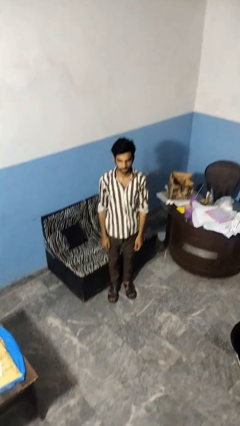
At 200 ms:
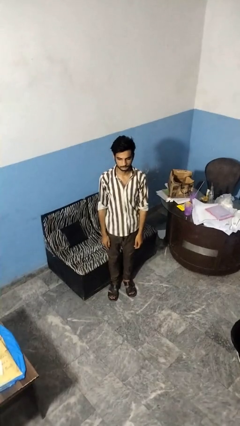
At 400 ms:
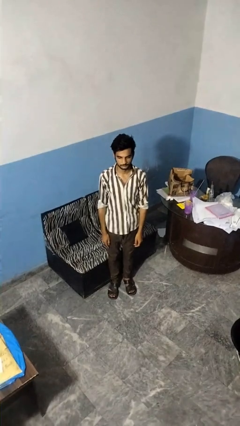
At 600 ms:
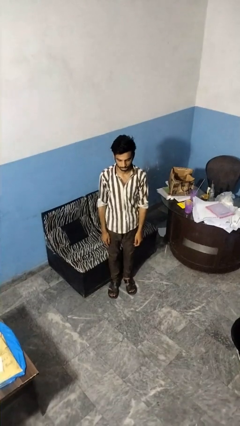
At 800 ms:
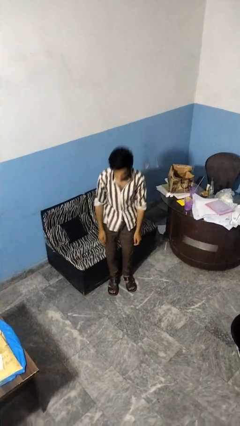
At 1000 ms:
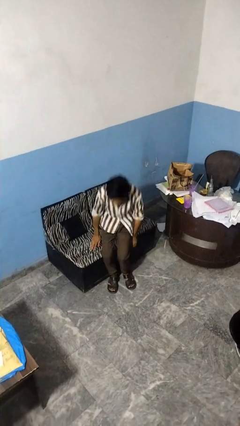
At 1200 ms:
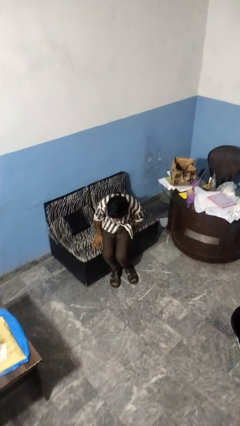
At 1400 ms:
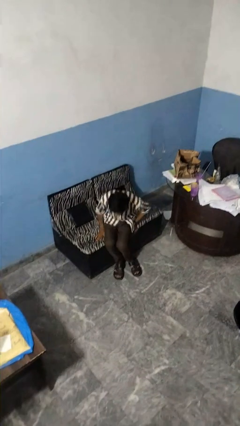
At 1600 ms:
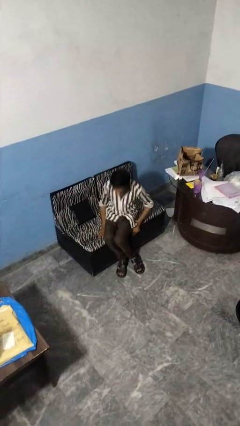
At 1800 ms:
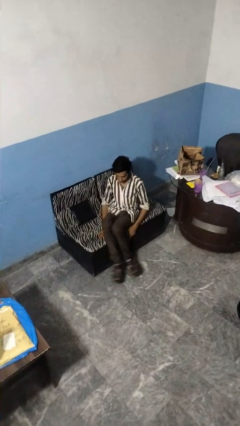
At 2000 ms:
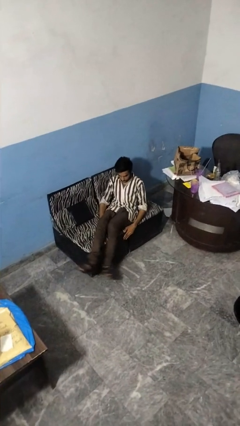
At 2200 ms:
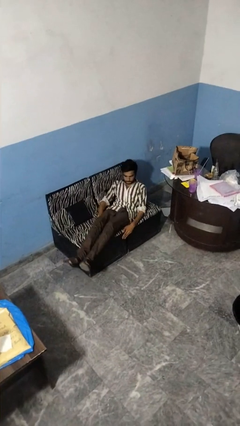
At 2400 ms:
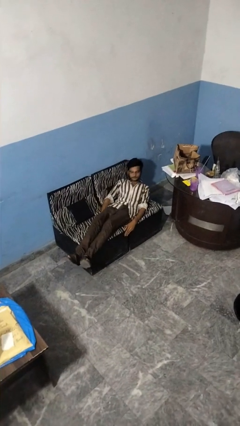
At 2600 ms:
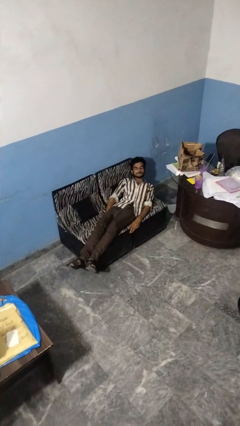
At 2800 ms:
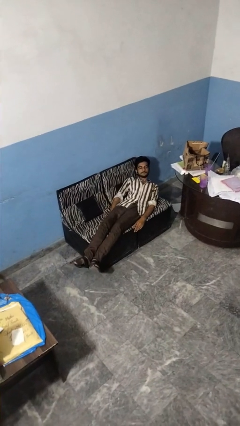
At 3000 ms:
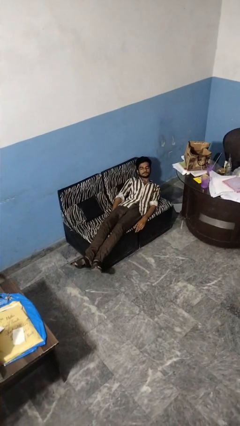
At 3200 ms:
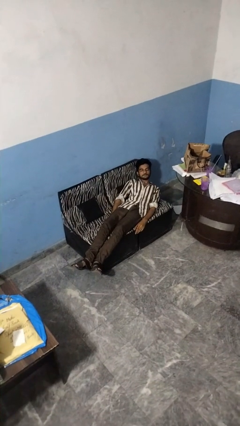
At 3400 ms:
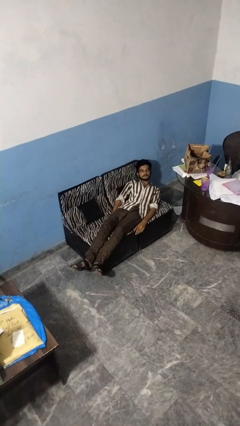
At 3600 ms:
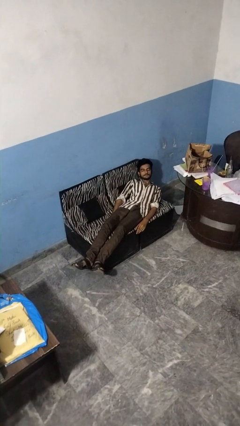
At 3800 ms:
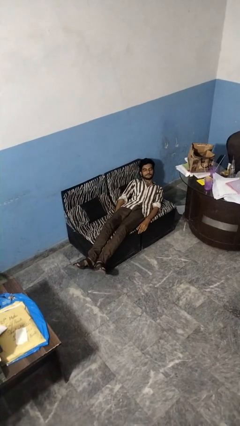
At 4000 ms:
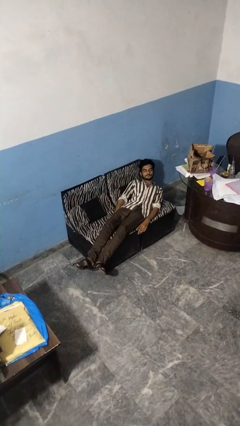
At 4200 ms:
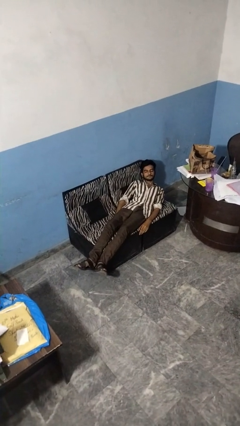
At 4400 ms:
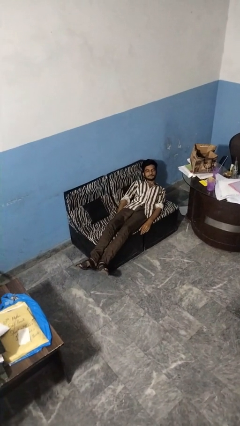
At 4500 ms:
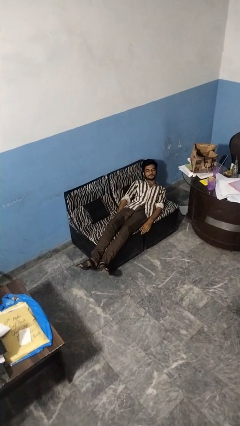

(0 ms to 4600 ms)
person lies down on couch

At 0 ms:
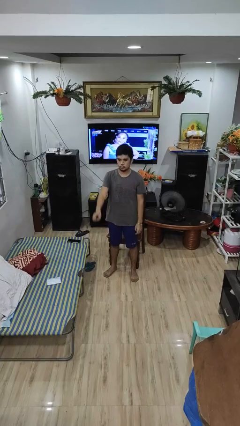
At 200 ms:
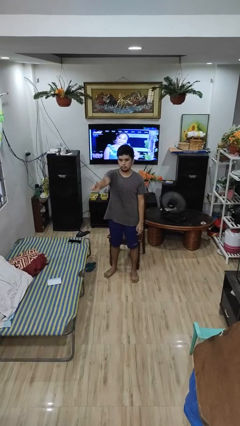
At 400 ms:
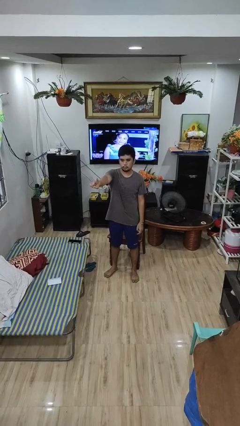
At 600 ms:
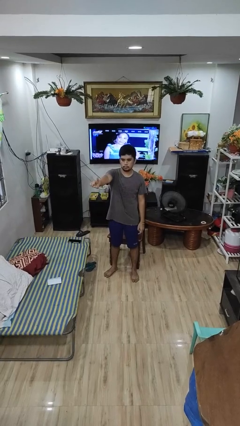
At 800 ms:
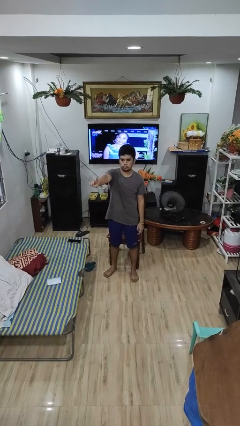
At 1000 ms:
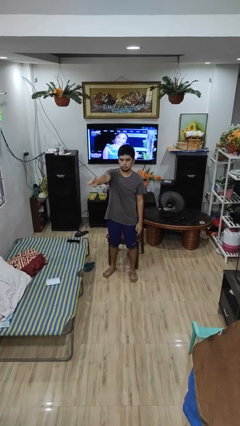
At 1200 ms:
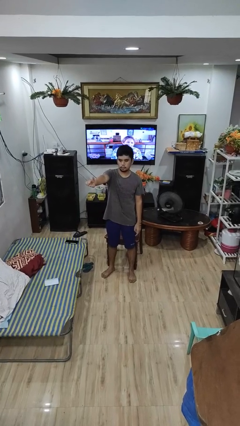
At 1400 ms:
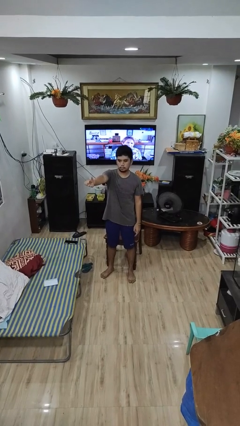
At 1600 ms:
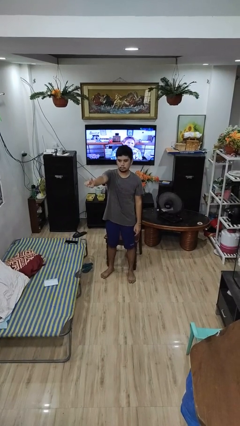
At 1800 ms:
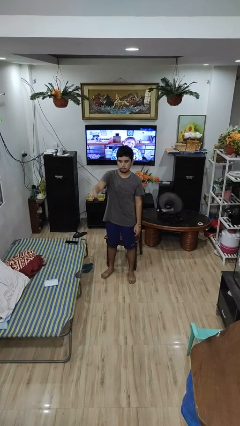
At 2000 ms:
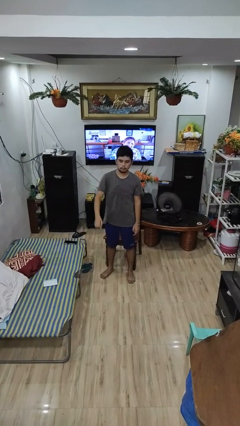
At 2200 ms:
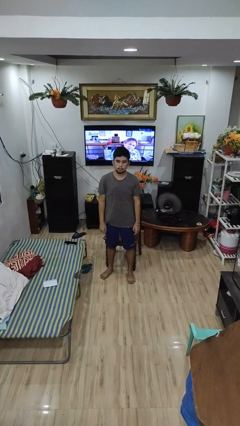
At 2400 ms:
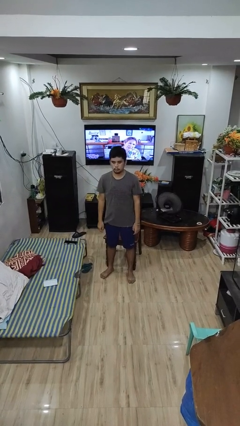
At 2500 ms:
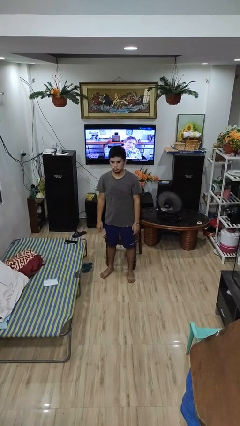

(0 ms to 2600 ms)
person gestures number one

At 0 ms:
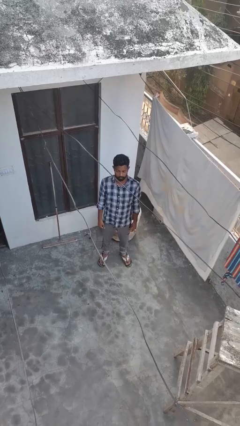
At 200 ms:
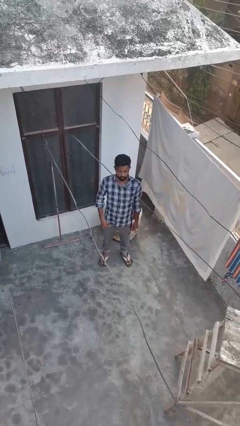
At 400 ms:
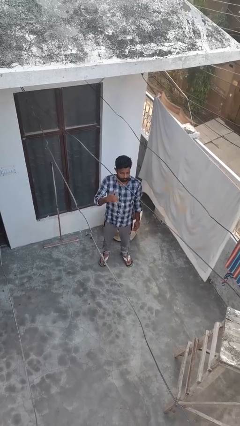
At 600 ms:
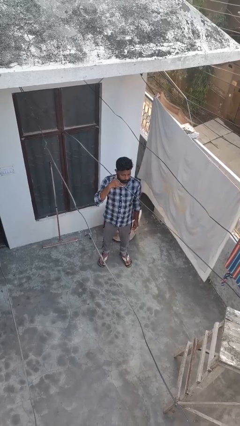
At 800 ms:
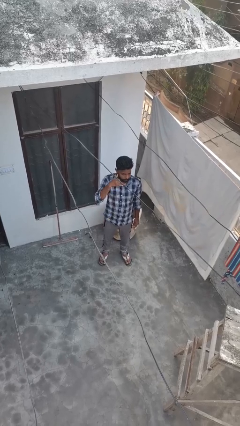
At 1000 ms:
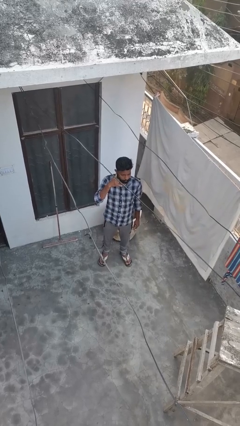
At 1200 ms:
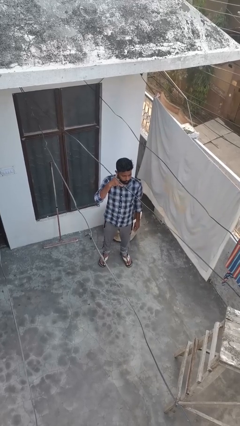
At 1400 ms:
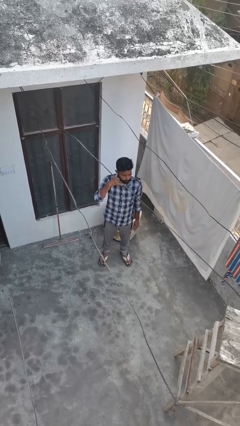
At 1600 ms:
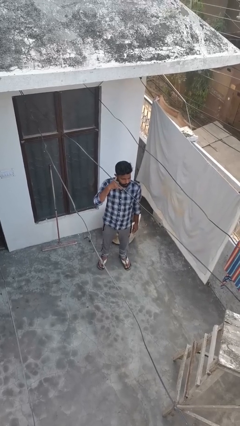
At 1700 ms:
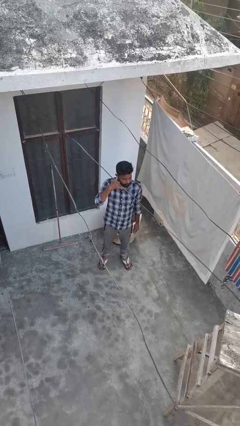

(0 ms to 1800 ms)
person gestures call me

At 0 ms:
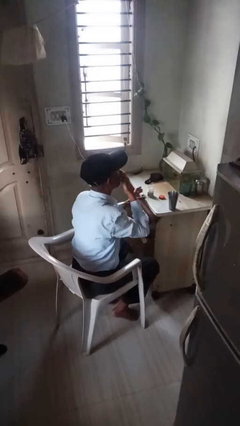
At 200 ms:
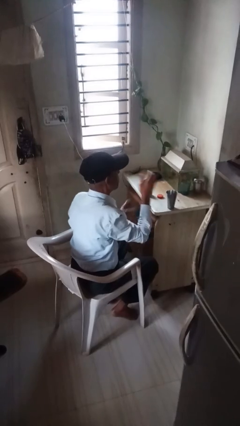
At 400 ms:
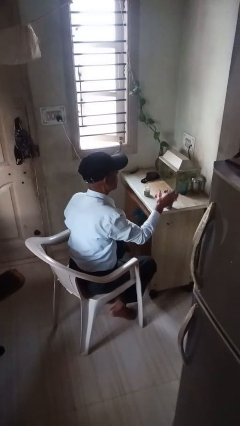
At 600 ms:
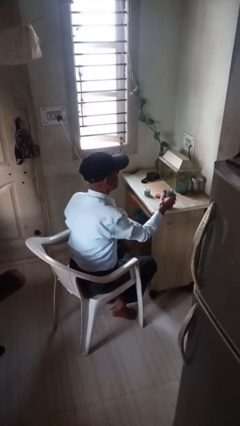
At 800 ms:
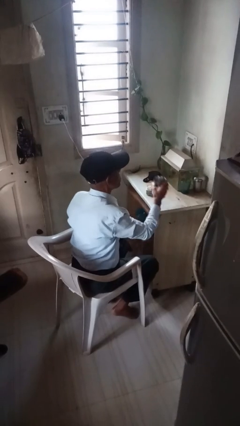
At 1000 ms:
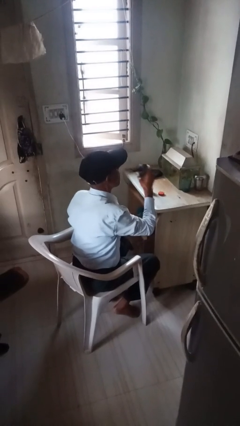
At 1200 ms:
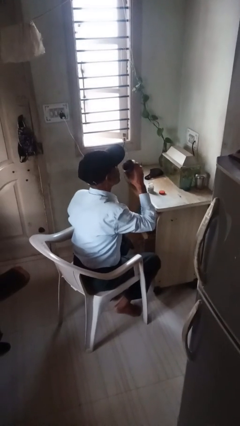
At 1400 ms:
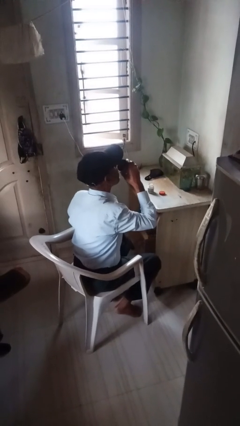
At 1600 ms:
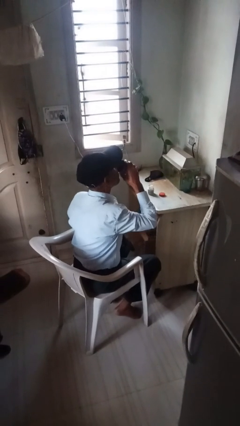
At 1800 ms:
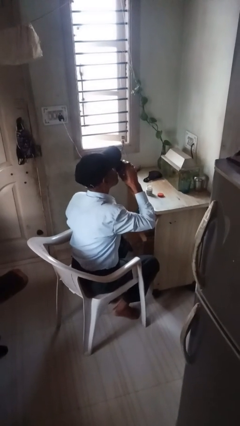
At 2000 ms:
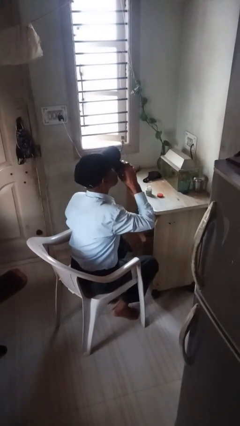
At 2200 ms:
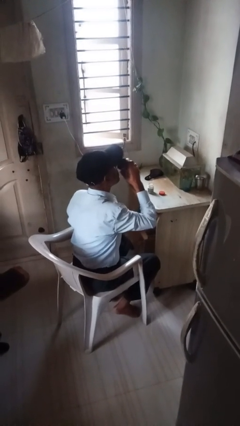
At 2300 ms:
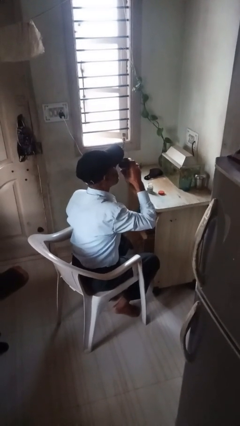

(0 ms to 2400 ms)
person drinks from cup

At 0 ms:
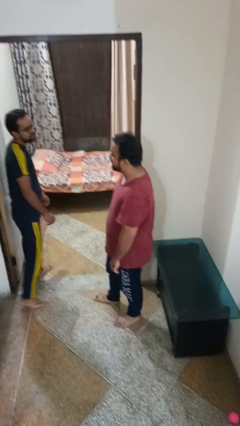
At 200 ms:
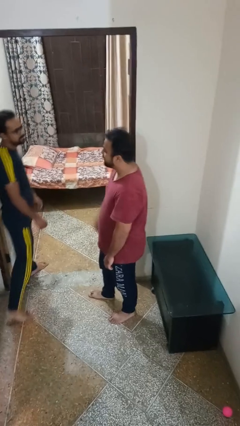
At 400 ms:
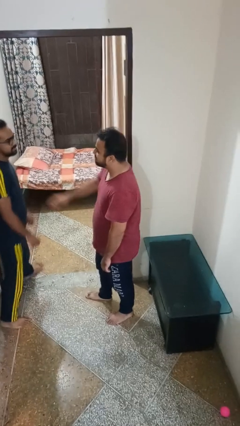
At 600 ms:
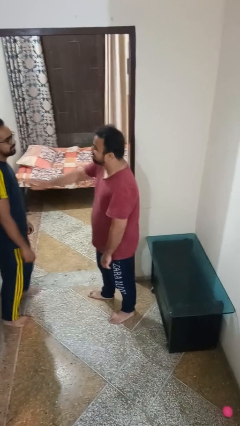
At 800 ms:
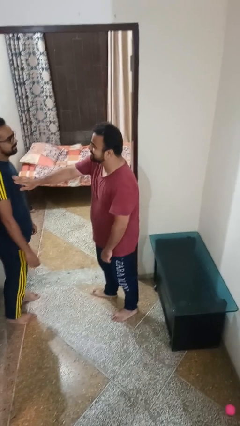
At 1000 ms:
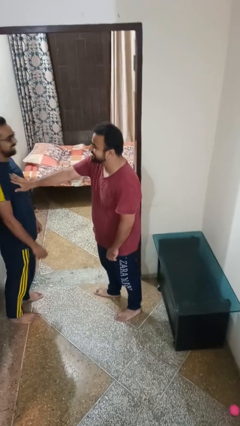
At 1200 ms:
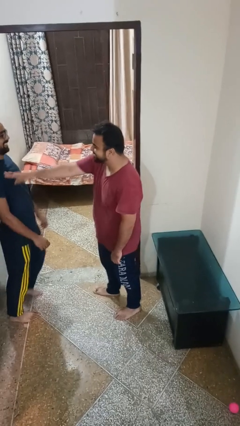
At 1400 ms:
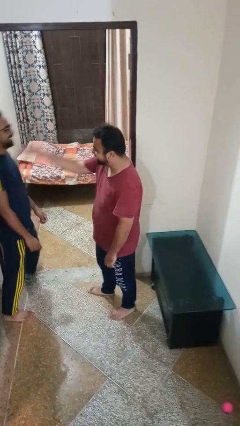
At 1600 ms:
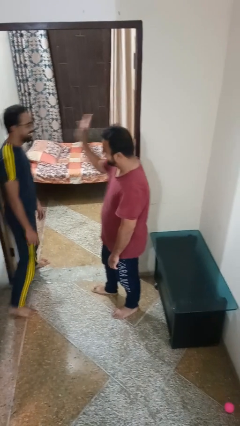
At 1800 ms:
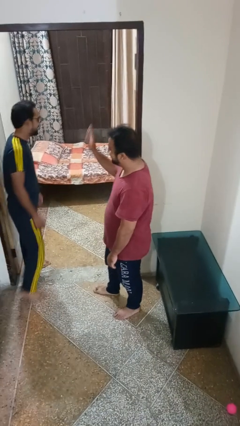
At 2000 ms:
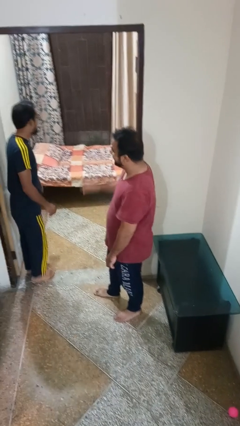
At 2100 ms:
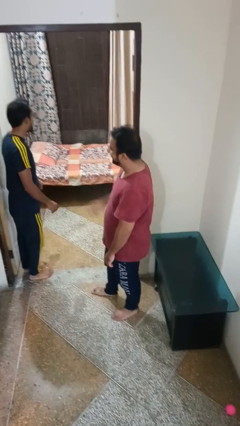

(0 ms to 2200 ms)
person shoves person

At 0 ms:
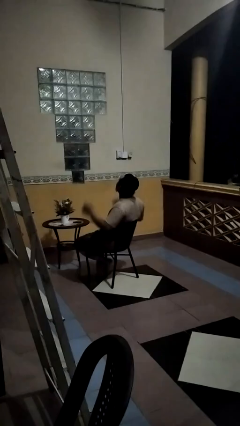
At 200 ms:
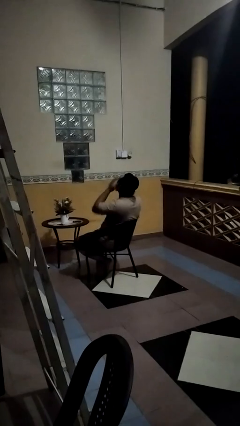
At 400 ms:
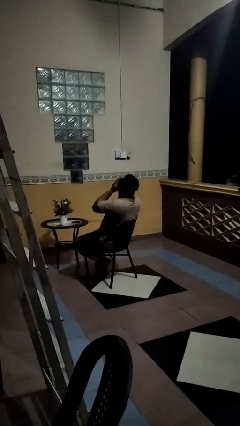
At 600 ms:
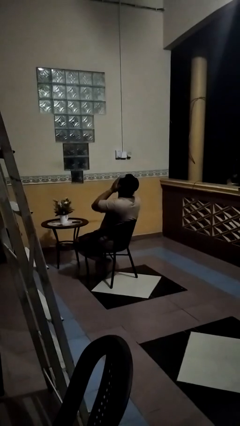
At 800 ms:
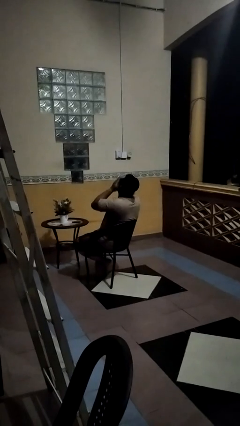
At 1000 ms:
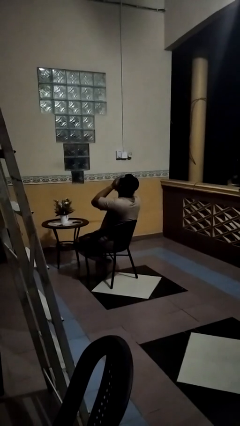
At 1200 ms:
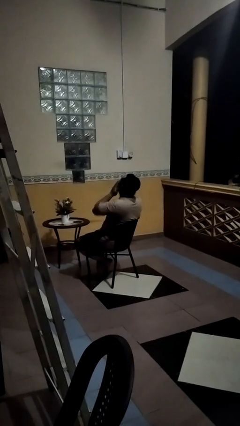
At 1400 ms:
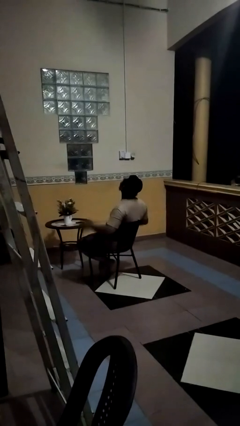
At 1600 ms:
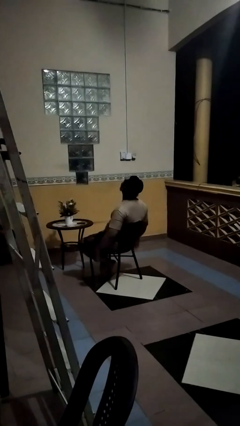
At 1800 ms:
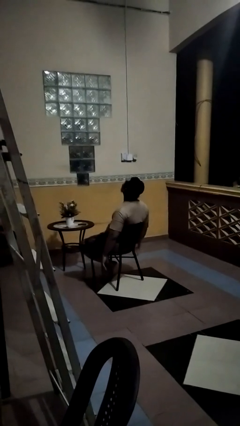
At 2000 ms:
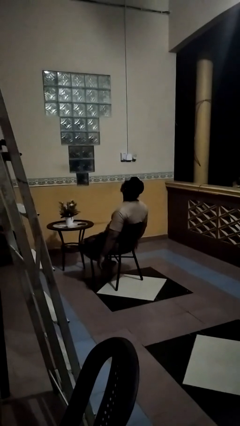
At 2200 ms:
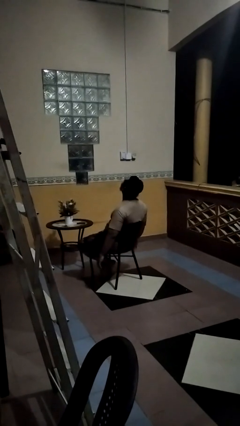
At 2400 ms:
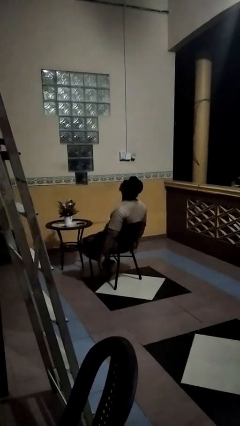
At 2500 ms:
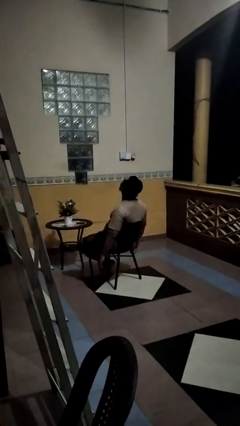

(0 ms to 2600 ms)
person covers face with hands

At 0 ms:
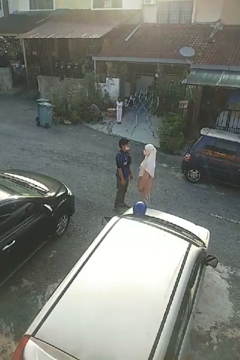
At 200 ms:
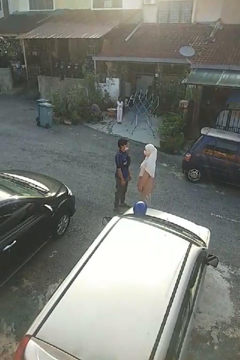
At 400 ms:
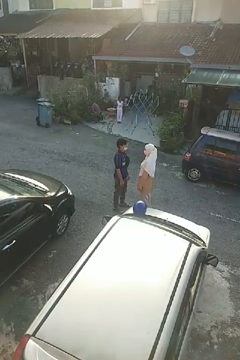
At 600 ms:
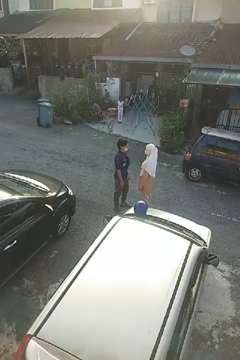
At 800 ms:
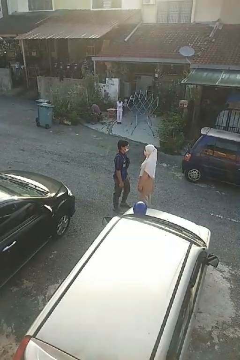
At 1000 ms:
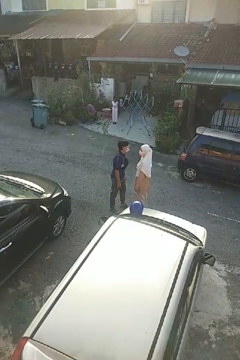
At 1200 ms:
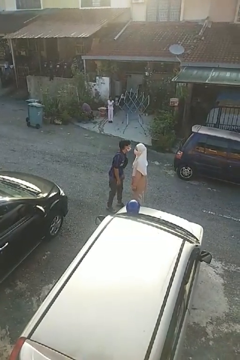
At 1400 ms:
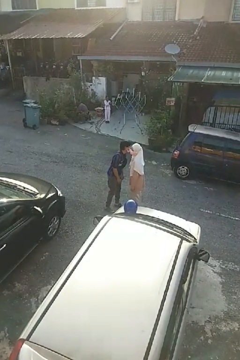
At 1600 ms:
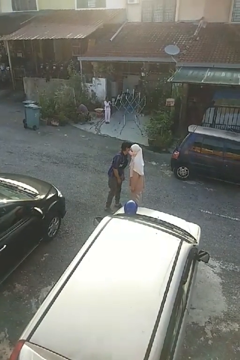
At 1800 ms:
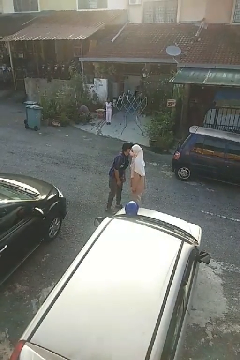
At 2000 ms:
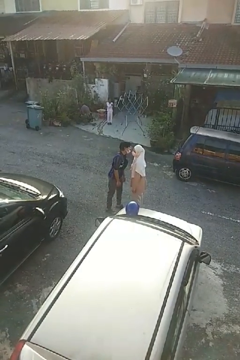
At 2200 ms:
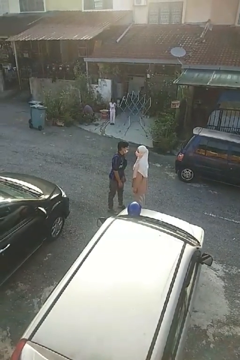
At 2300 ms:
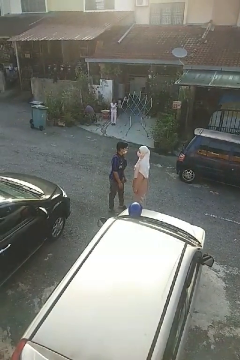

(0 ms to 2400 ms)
person kisses cheek of person
